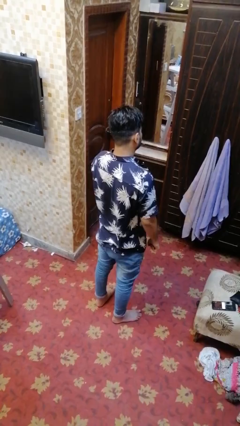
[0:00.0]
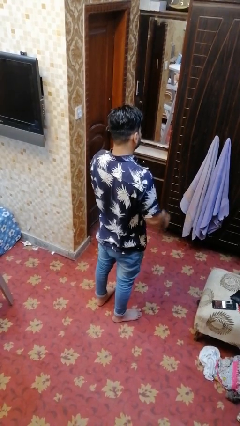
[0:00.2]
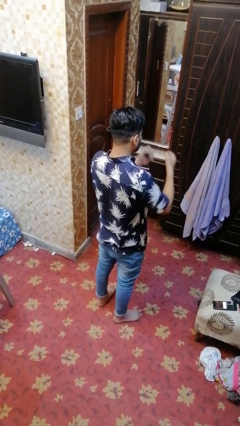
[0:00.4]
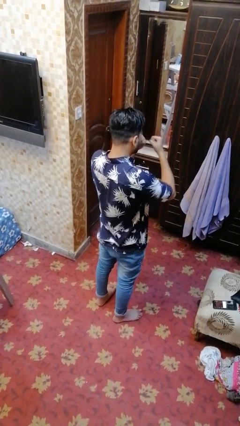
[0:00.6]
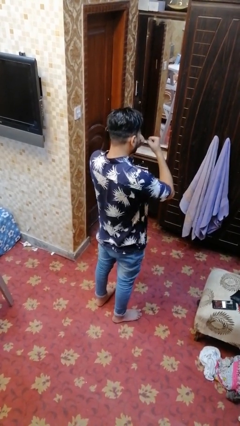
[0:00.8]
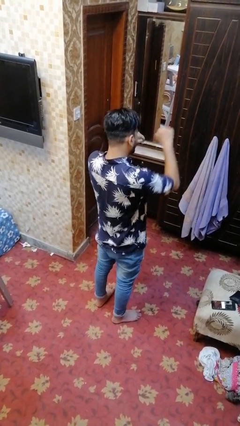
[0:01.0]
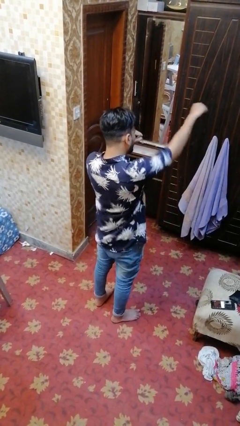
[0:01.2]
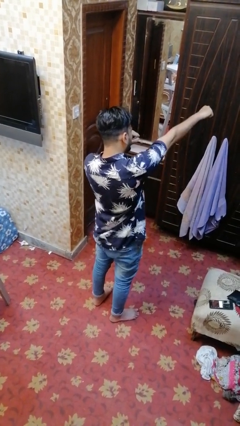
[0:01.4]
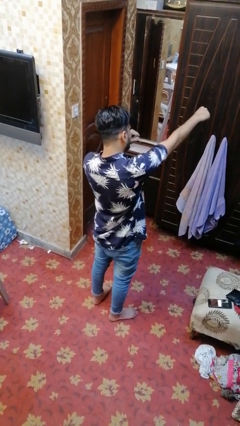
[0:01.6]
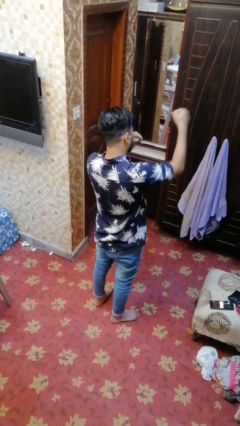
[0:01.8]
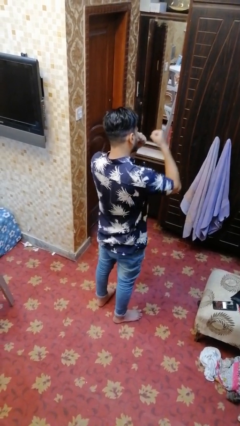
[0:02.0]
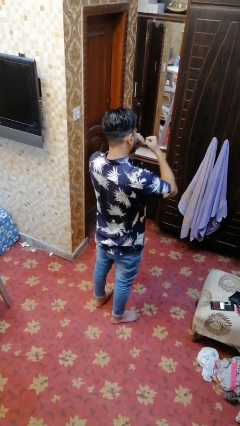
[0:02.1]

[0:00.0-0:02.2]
person punches

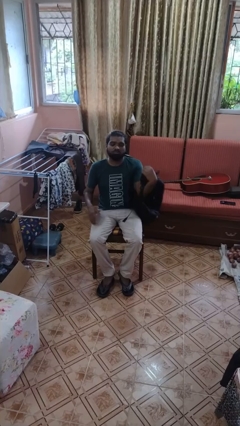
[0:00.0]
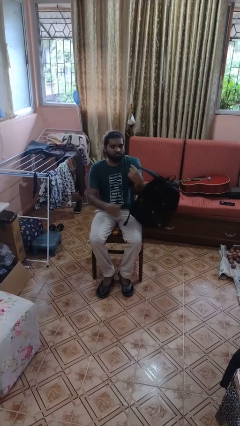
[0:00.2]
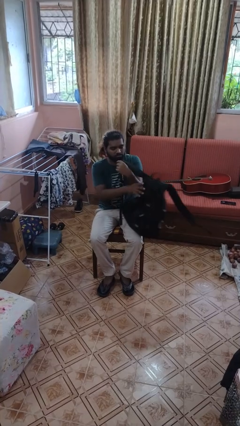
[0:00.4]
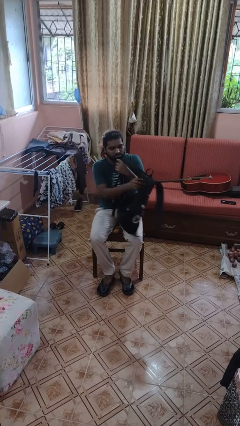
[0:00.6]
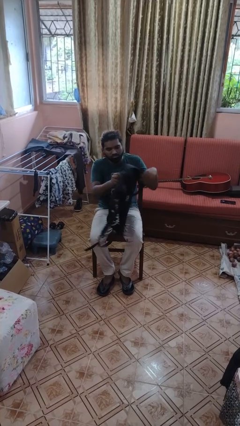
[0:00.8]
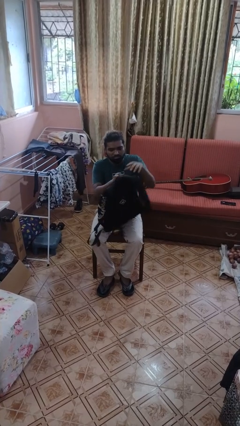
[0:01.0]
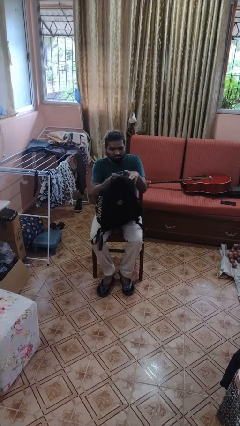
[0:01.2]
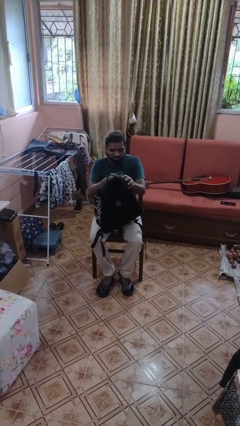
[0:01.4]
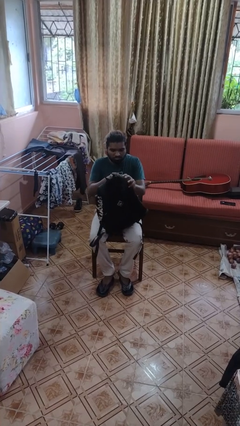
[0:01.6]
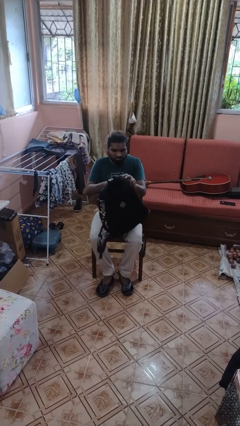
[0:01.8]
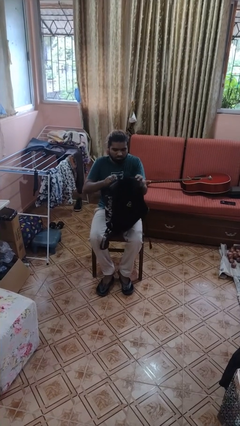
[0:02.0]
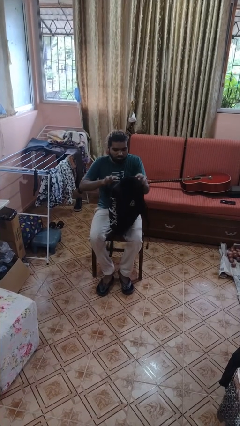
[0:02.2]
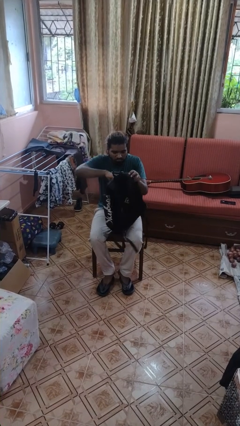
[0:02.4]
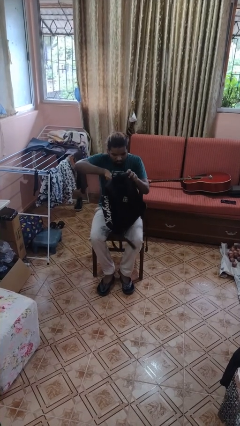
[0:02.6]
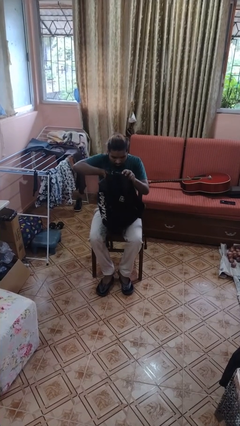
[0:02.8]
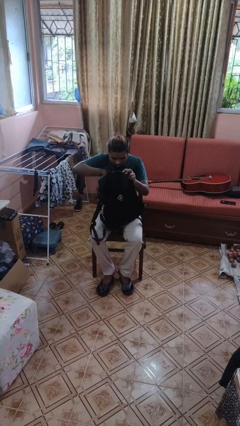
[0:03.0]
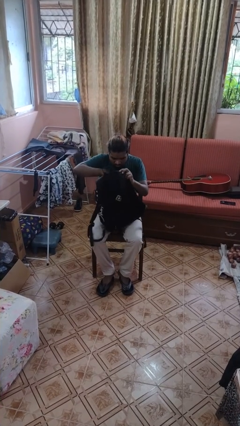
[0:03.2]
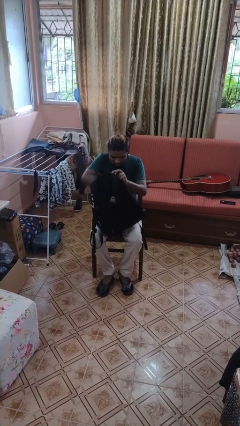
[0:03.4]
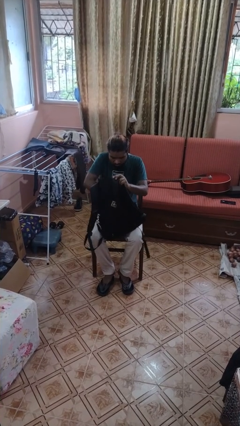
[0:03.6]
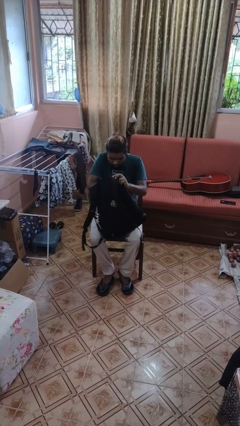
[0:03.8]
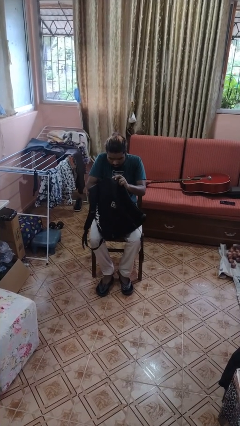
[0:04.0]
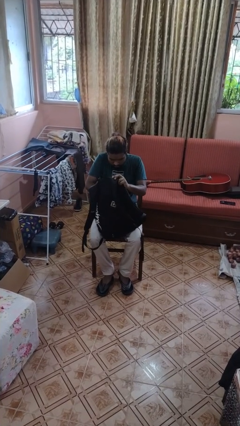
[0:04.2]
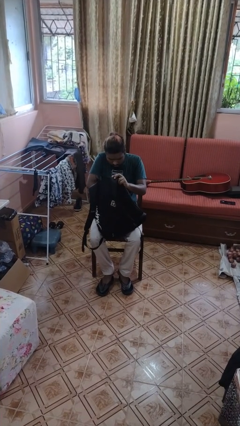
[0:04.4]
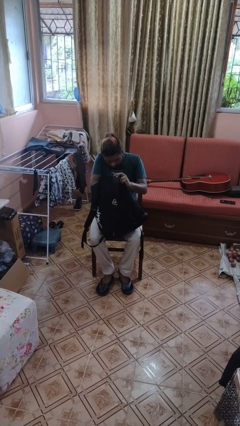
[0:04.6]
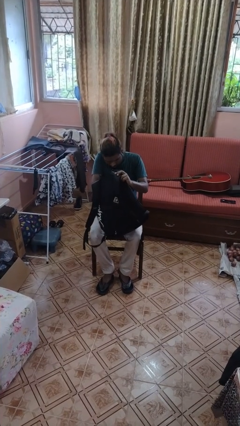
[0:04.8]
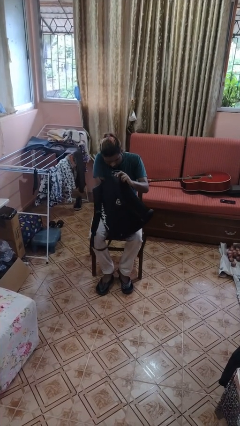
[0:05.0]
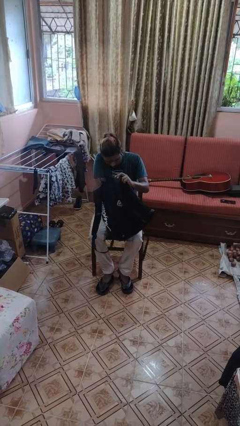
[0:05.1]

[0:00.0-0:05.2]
person searches in backpack

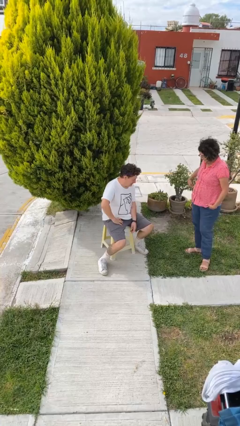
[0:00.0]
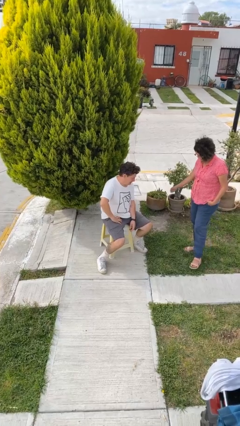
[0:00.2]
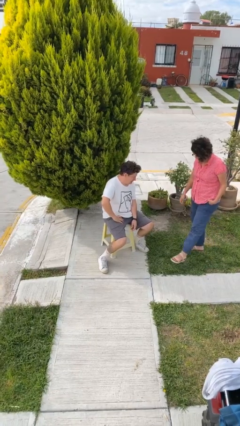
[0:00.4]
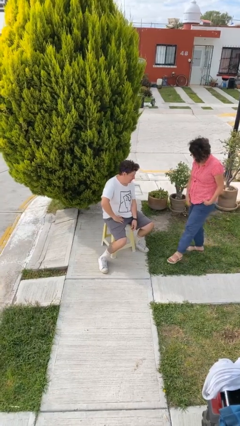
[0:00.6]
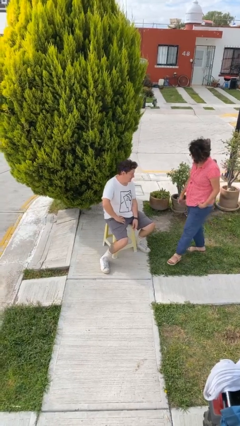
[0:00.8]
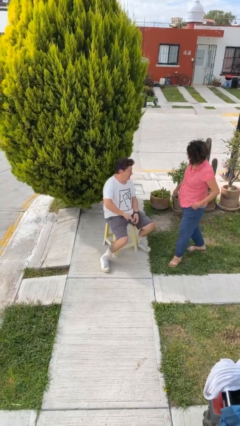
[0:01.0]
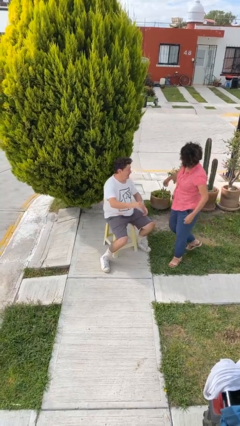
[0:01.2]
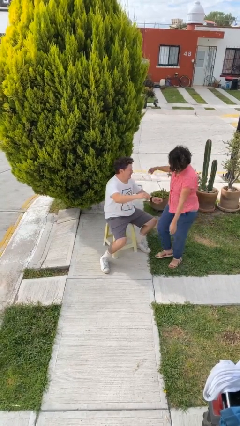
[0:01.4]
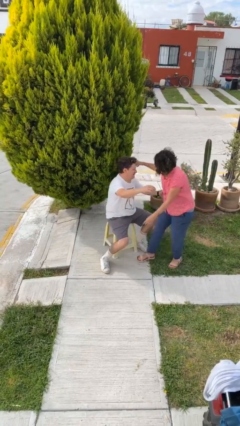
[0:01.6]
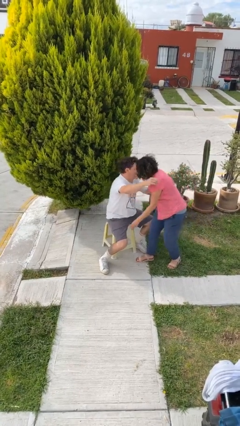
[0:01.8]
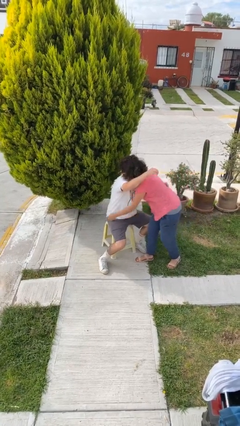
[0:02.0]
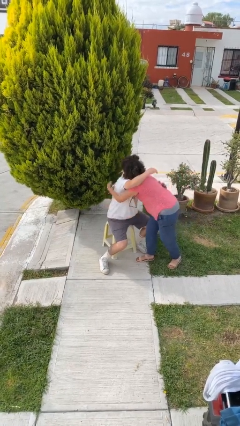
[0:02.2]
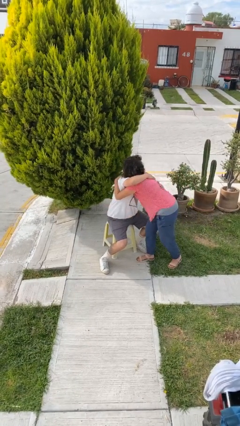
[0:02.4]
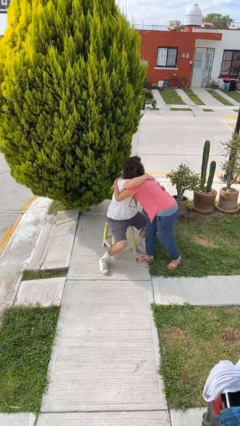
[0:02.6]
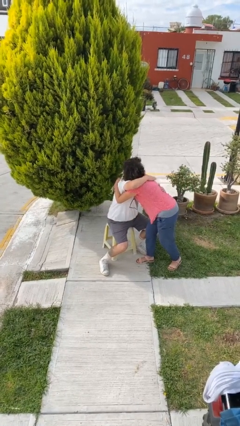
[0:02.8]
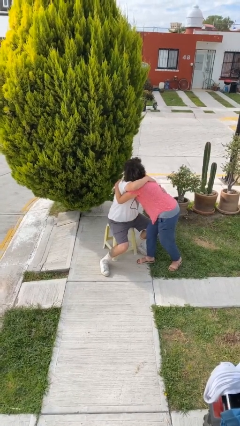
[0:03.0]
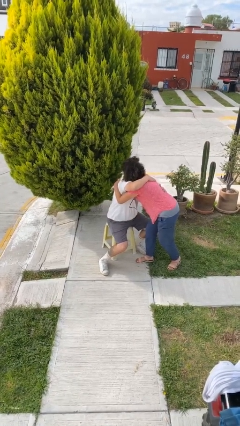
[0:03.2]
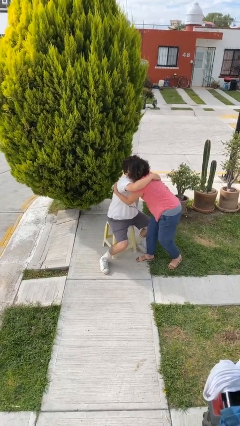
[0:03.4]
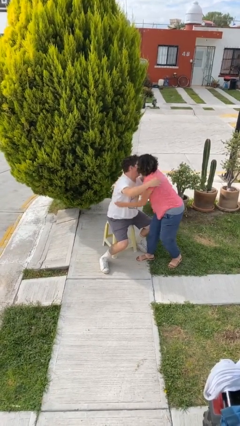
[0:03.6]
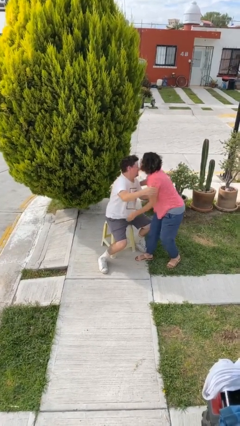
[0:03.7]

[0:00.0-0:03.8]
person embraces person

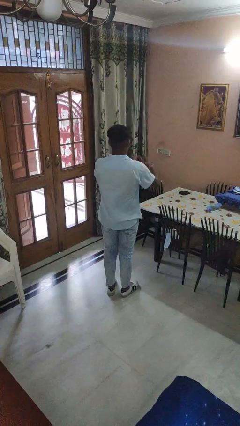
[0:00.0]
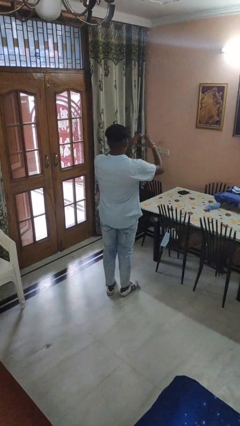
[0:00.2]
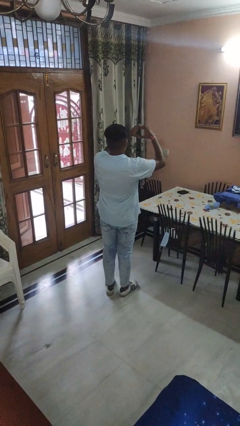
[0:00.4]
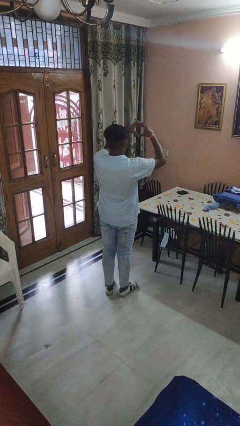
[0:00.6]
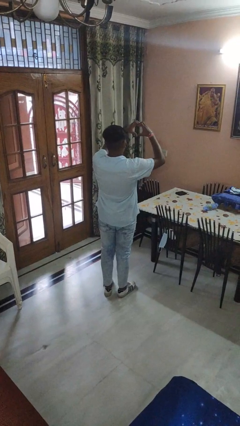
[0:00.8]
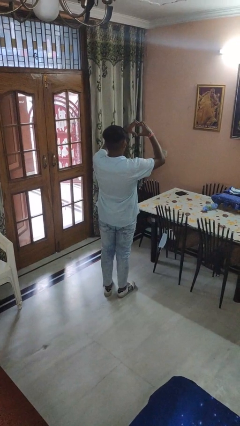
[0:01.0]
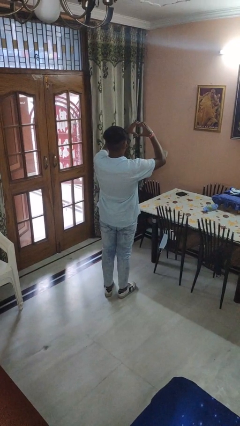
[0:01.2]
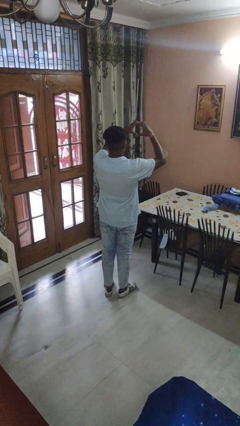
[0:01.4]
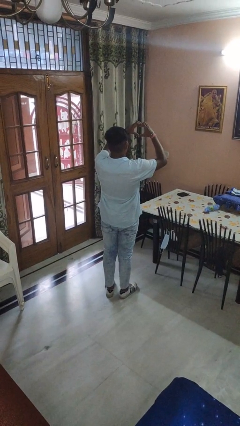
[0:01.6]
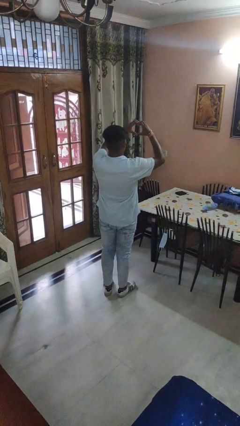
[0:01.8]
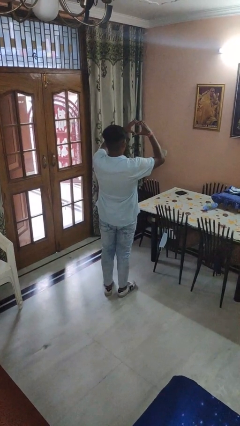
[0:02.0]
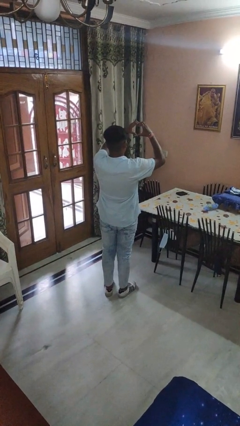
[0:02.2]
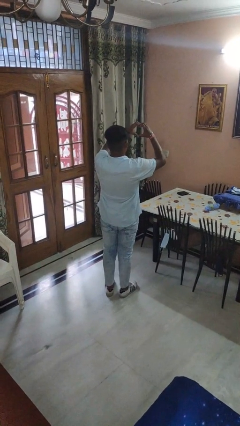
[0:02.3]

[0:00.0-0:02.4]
person gestures heart

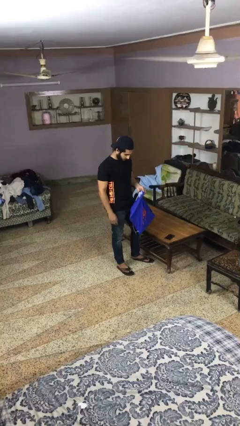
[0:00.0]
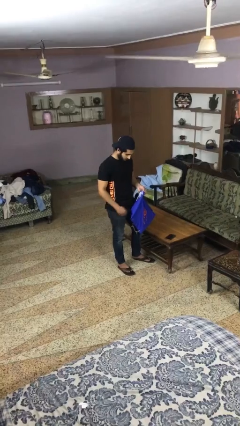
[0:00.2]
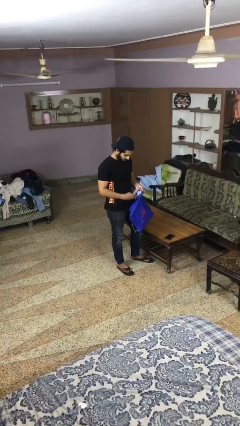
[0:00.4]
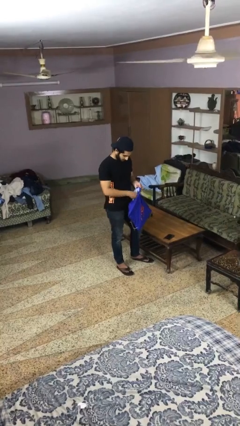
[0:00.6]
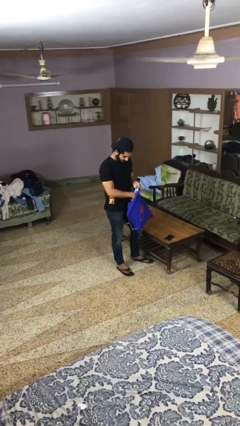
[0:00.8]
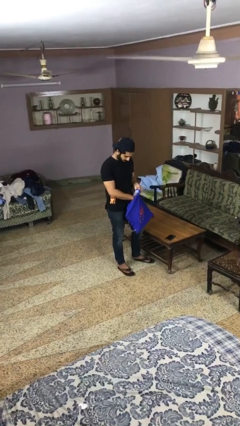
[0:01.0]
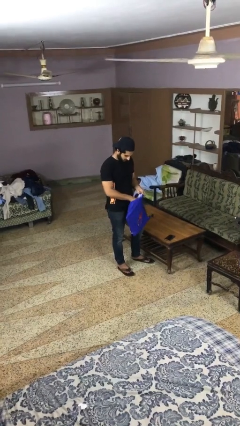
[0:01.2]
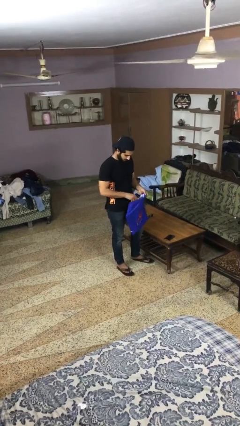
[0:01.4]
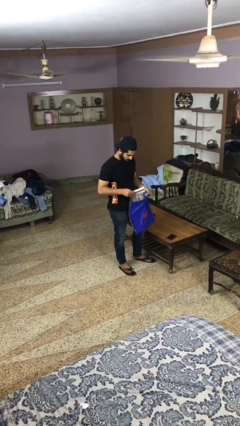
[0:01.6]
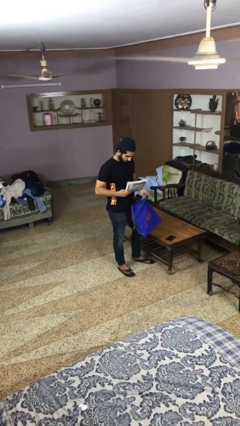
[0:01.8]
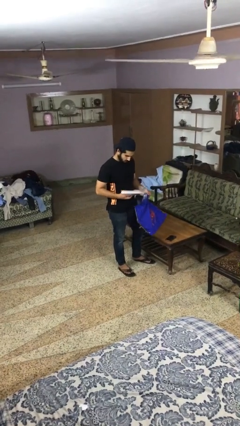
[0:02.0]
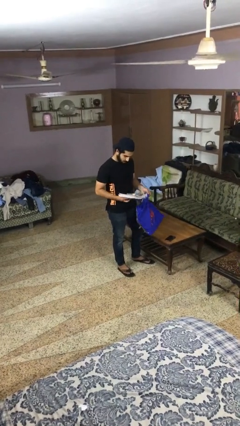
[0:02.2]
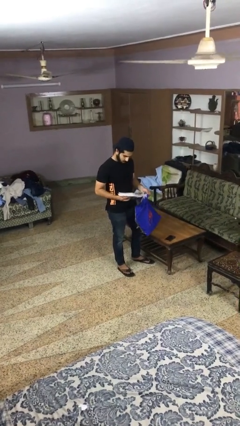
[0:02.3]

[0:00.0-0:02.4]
person takes object from bag

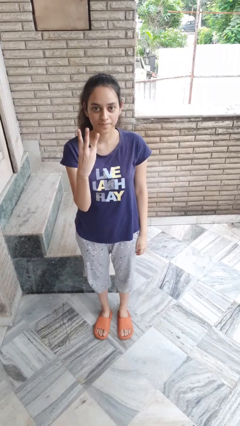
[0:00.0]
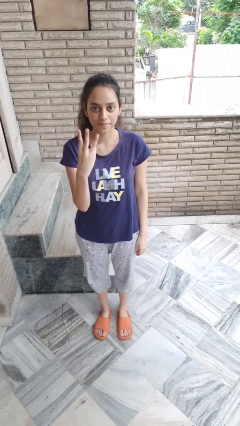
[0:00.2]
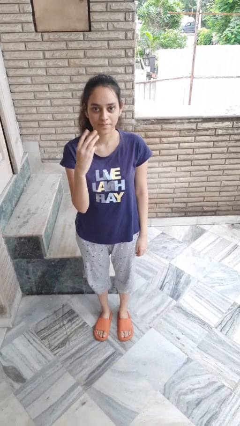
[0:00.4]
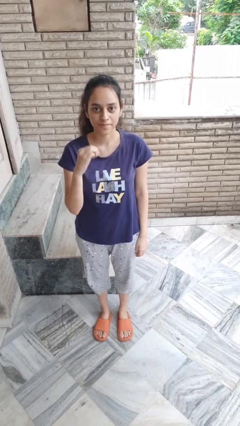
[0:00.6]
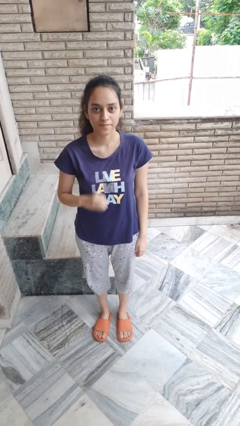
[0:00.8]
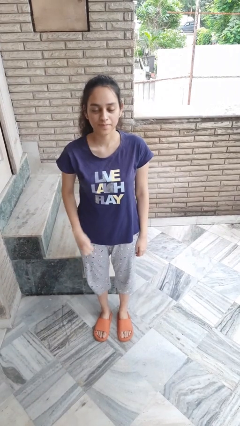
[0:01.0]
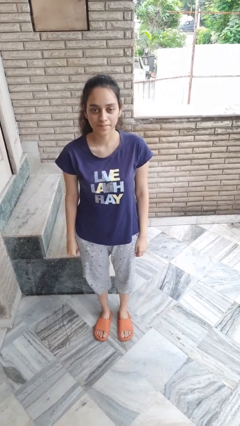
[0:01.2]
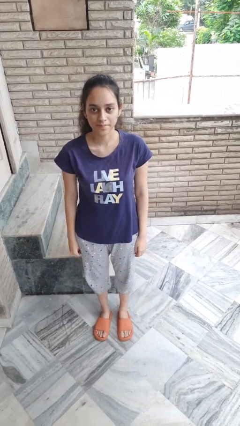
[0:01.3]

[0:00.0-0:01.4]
person gestures number three
